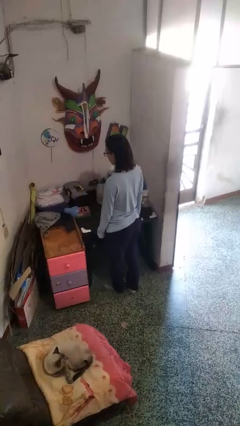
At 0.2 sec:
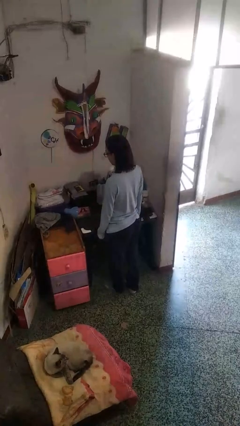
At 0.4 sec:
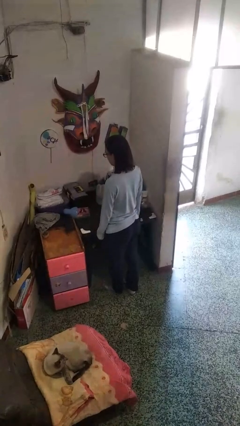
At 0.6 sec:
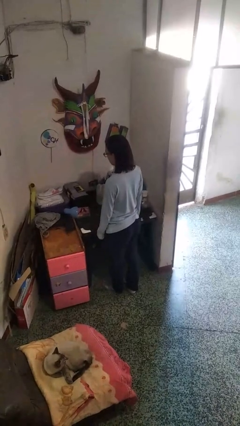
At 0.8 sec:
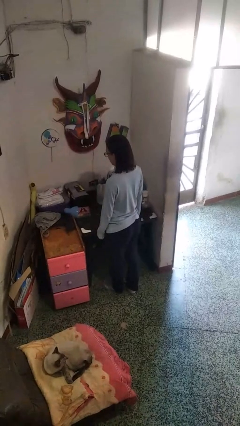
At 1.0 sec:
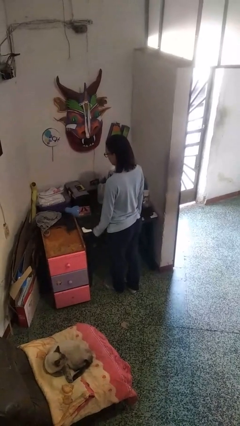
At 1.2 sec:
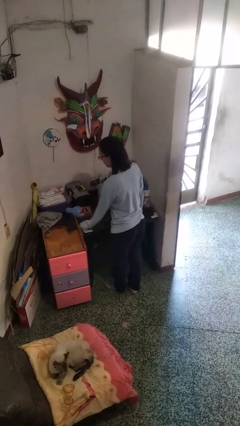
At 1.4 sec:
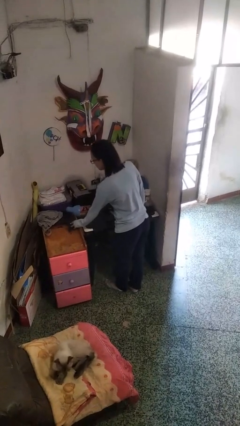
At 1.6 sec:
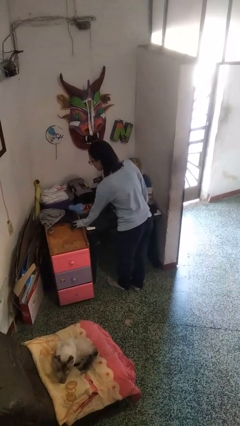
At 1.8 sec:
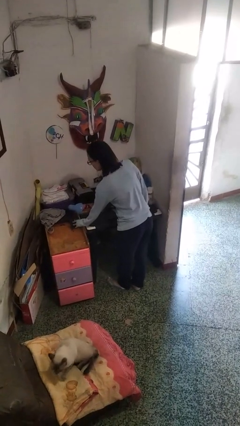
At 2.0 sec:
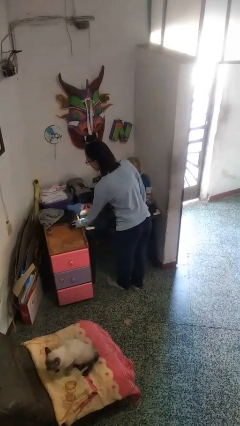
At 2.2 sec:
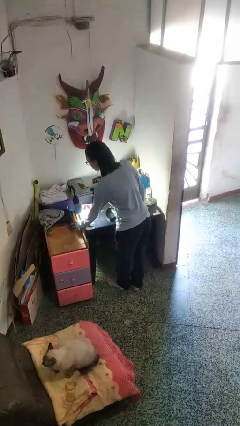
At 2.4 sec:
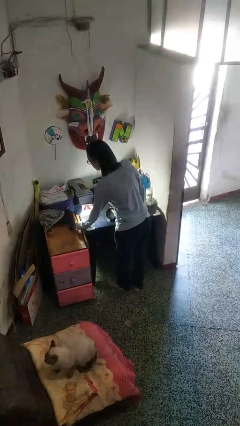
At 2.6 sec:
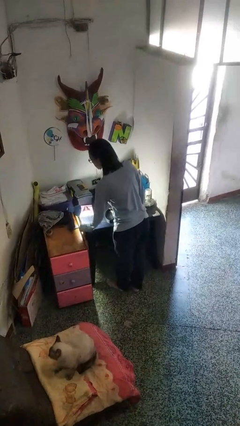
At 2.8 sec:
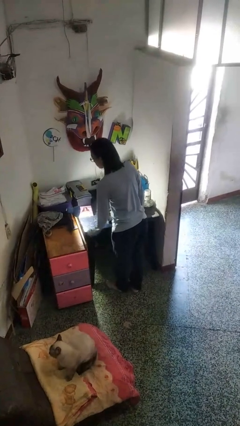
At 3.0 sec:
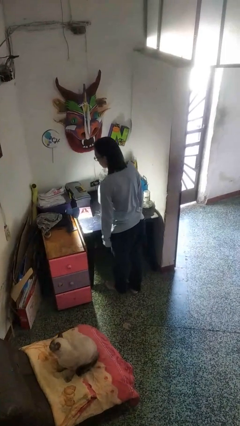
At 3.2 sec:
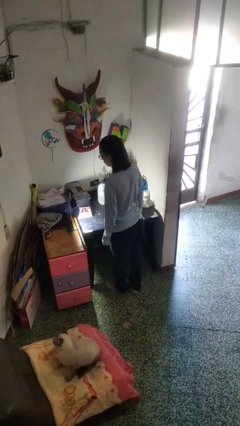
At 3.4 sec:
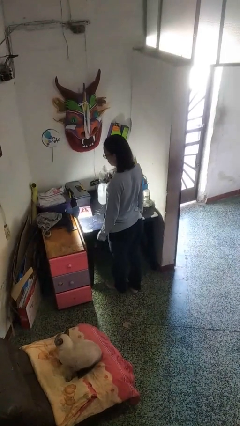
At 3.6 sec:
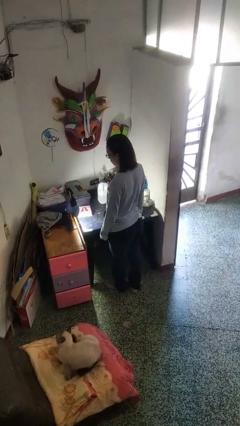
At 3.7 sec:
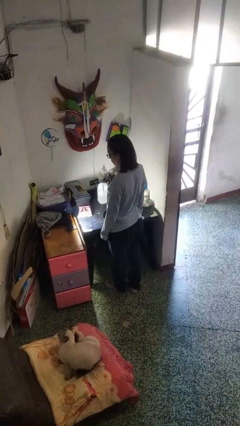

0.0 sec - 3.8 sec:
person turns on lamp

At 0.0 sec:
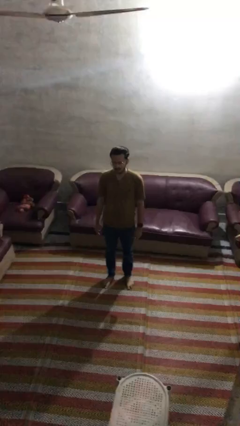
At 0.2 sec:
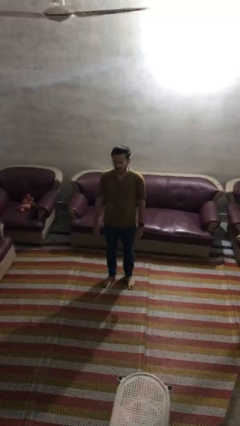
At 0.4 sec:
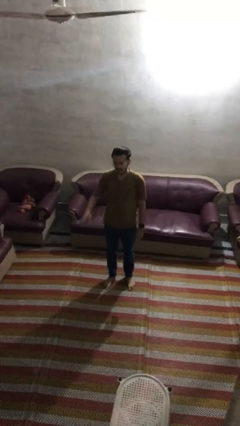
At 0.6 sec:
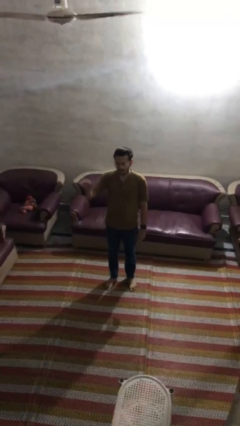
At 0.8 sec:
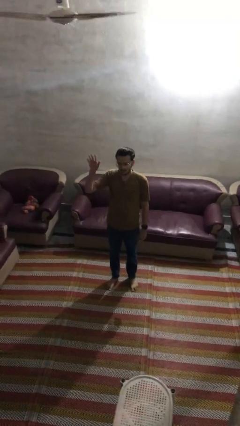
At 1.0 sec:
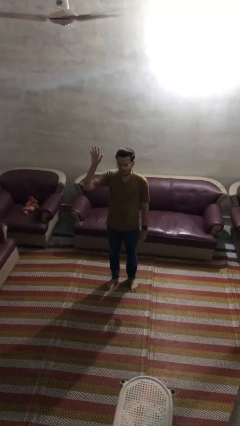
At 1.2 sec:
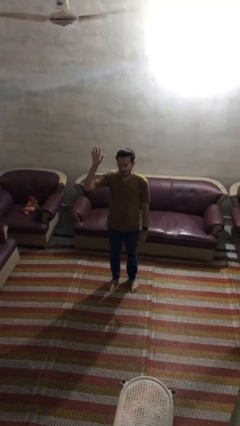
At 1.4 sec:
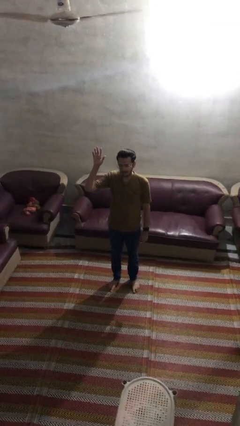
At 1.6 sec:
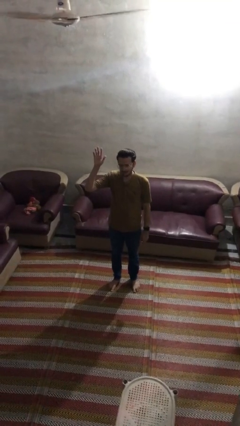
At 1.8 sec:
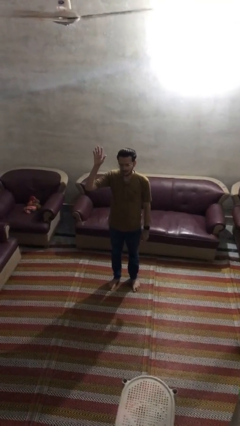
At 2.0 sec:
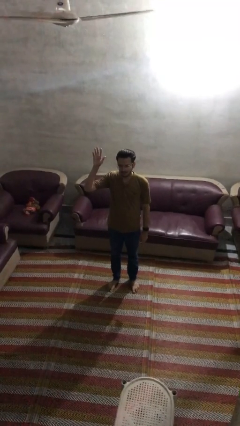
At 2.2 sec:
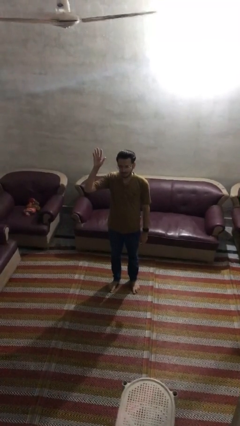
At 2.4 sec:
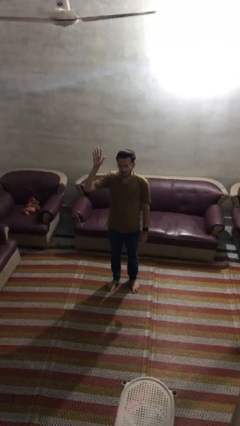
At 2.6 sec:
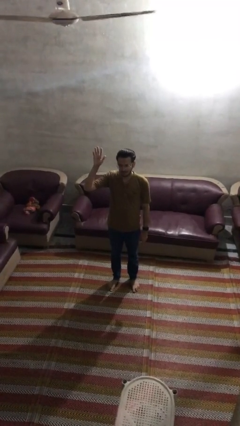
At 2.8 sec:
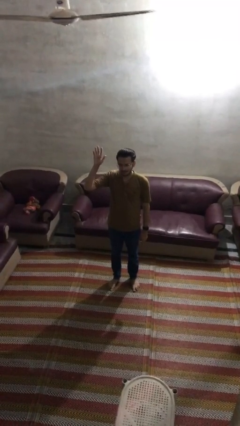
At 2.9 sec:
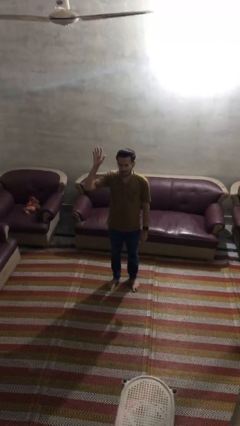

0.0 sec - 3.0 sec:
person gestures raise hand

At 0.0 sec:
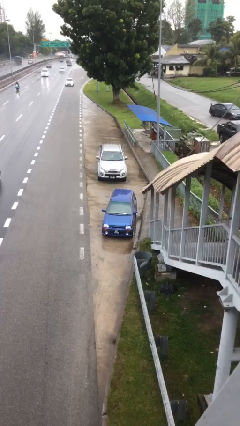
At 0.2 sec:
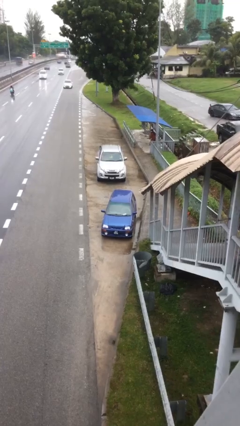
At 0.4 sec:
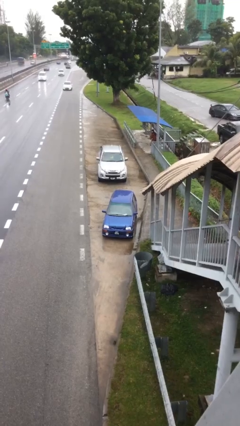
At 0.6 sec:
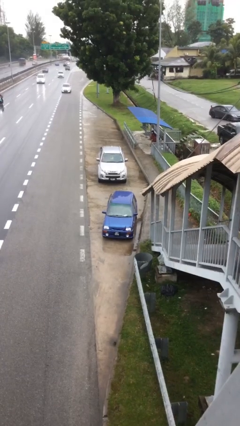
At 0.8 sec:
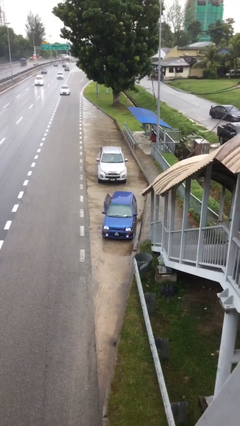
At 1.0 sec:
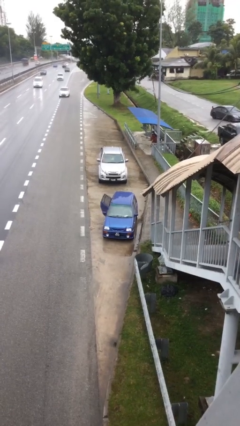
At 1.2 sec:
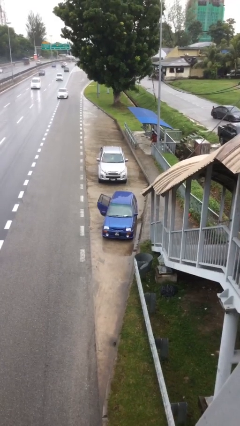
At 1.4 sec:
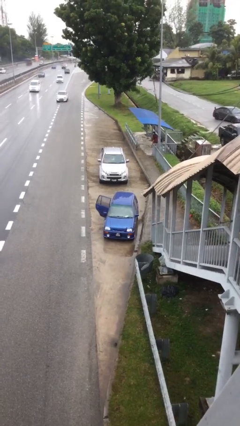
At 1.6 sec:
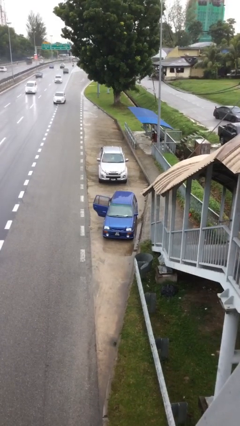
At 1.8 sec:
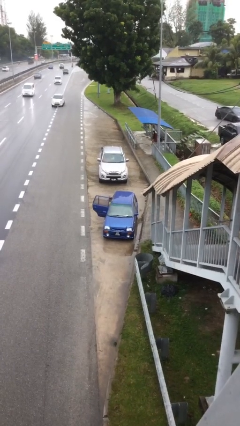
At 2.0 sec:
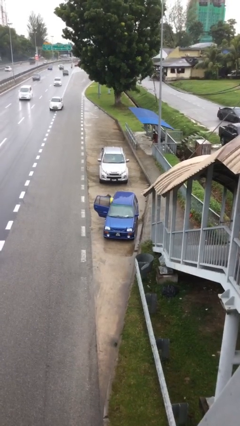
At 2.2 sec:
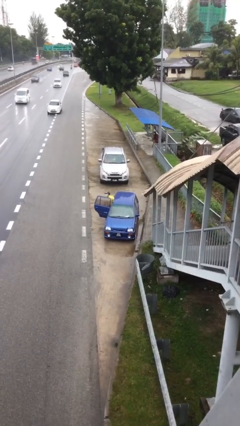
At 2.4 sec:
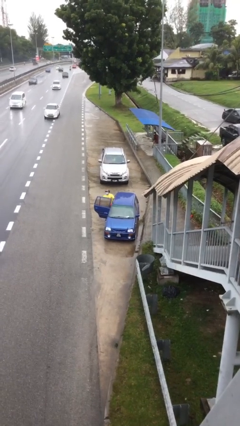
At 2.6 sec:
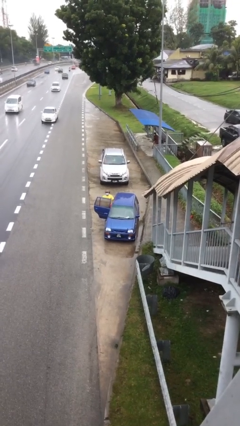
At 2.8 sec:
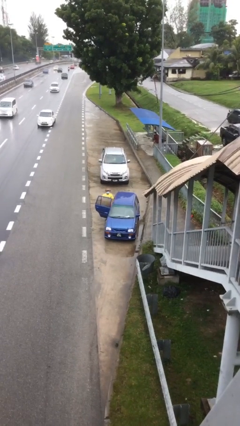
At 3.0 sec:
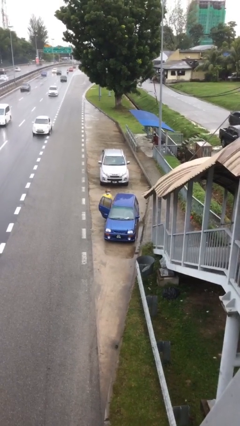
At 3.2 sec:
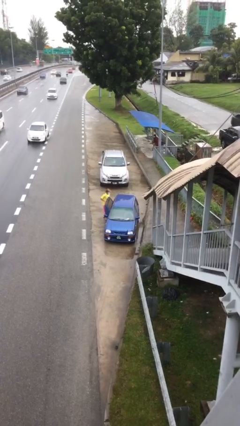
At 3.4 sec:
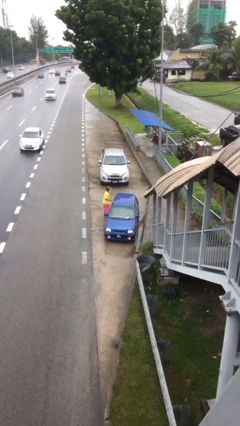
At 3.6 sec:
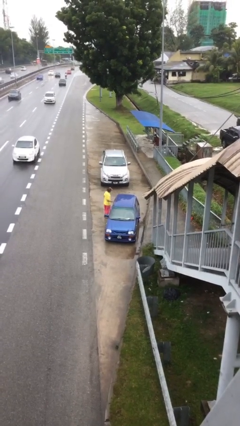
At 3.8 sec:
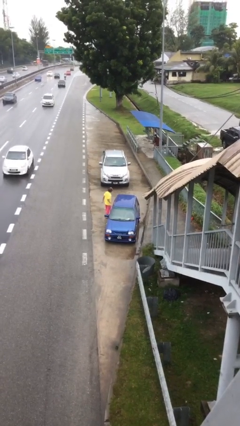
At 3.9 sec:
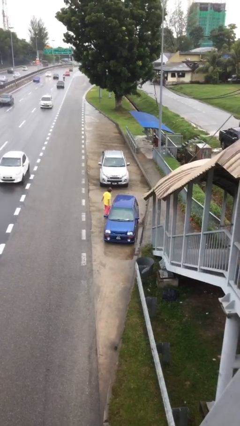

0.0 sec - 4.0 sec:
car drops off person

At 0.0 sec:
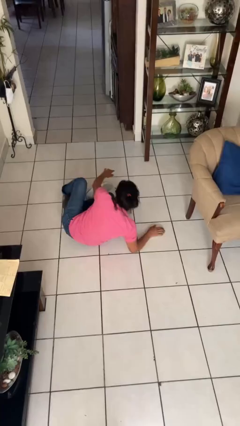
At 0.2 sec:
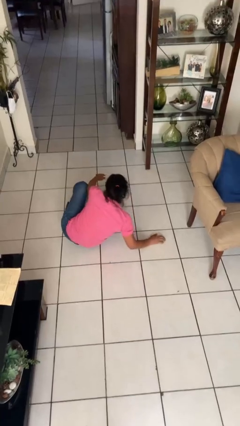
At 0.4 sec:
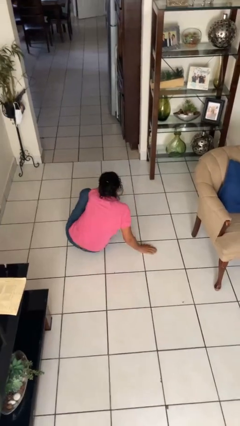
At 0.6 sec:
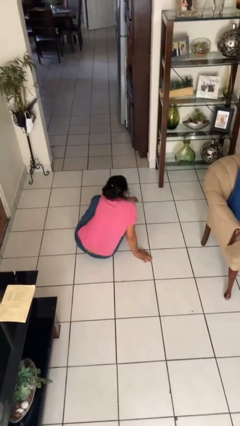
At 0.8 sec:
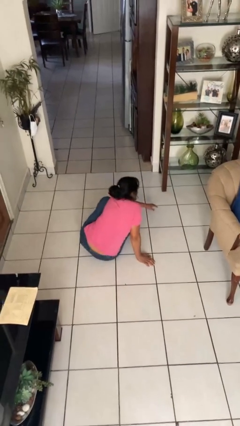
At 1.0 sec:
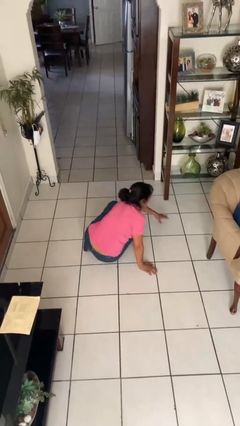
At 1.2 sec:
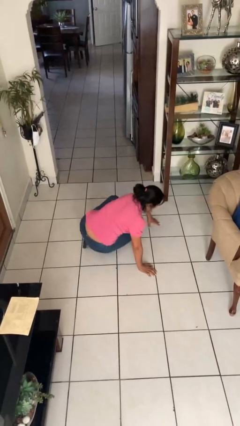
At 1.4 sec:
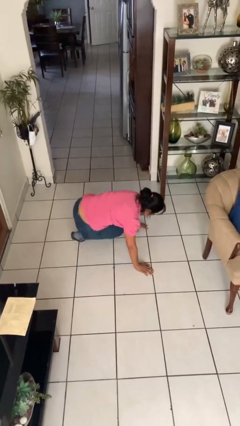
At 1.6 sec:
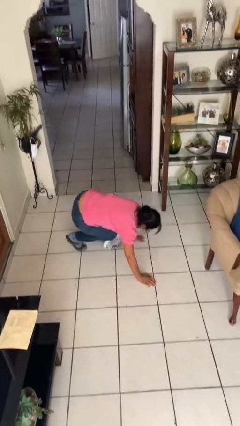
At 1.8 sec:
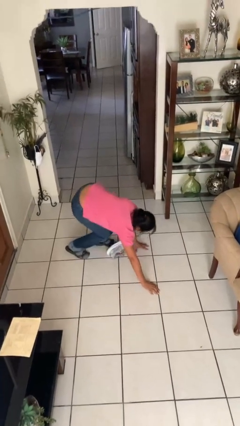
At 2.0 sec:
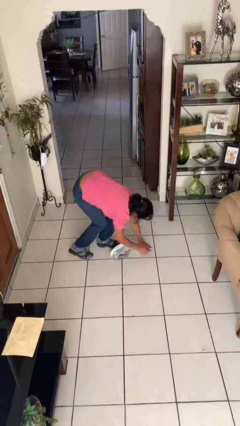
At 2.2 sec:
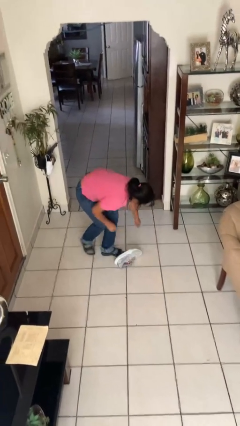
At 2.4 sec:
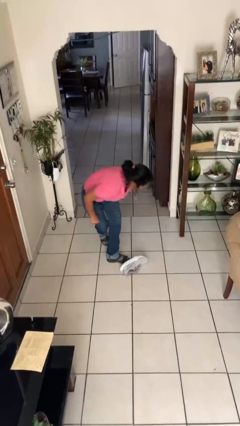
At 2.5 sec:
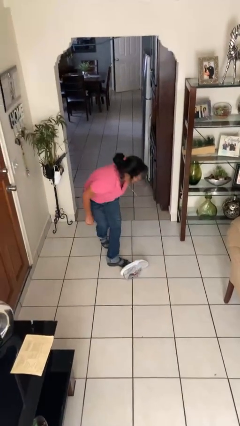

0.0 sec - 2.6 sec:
person stands up from floor

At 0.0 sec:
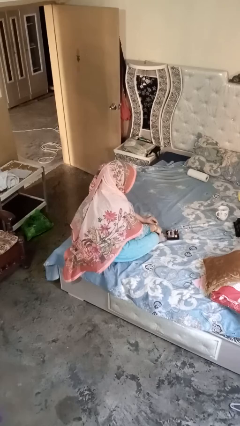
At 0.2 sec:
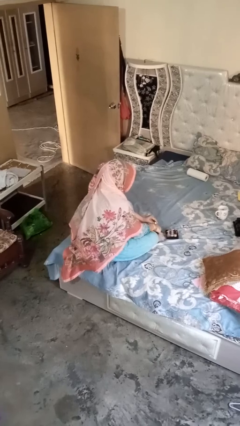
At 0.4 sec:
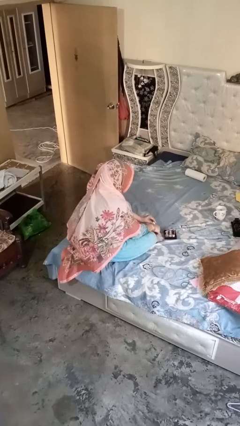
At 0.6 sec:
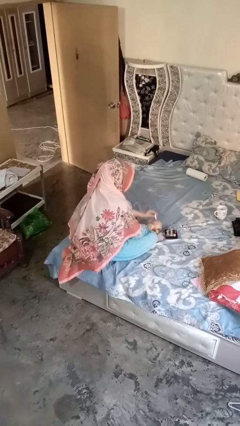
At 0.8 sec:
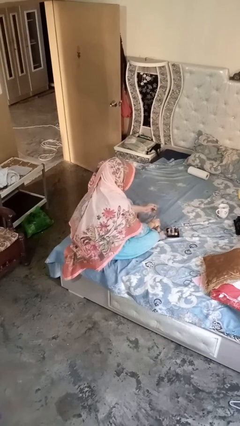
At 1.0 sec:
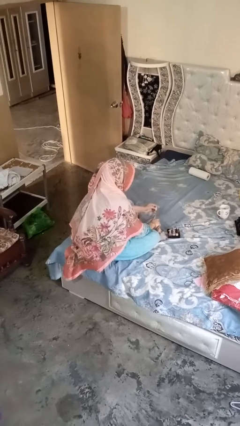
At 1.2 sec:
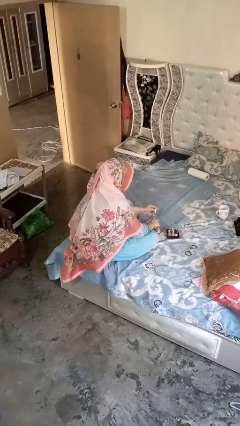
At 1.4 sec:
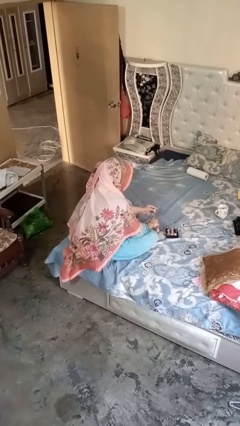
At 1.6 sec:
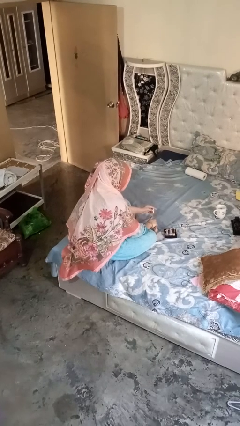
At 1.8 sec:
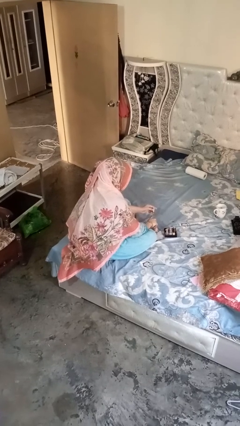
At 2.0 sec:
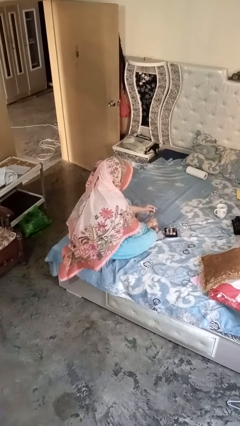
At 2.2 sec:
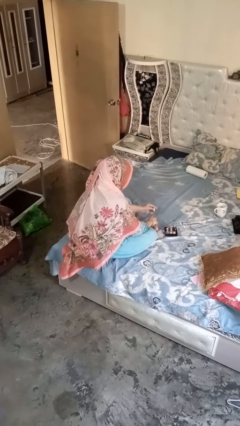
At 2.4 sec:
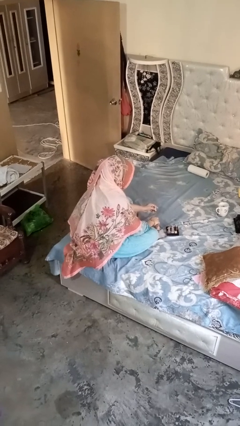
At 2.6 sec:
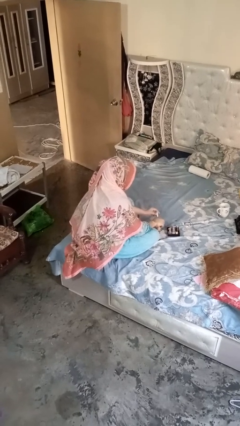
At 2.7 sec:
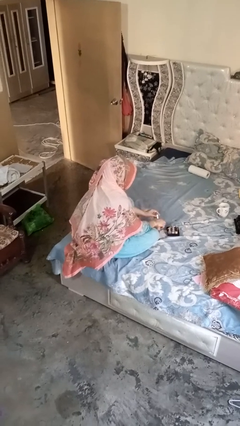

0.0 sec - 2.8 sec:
person paints fingernails

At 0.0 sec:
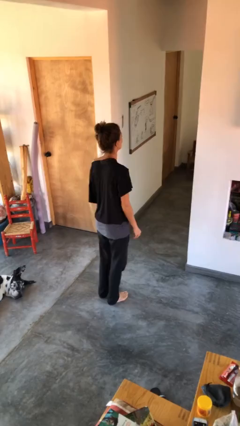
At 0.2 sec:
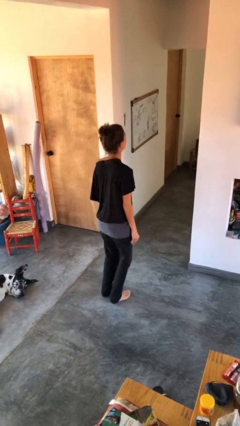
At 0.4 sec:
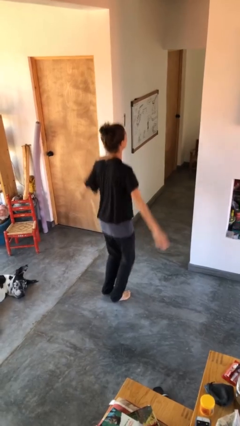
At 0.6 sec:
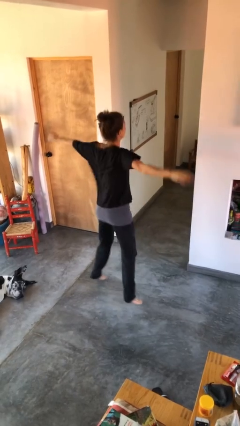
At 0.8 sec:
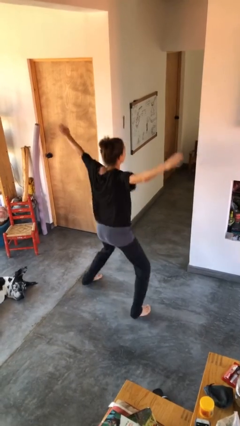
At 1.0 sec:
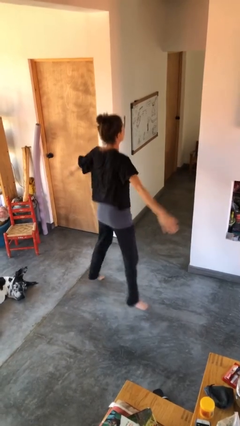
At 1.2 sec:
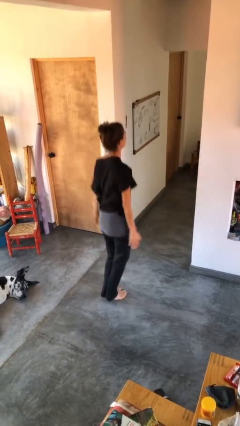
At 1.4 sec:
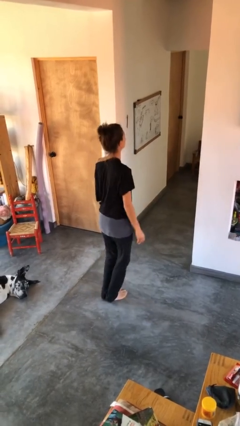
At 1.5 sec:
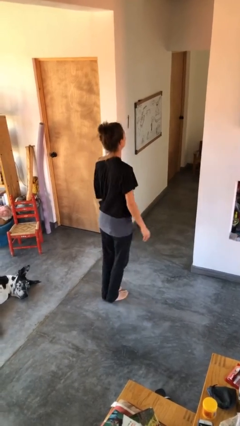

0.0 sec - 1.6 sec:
person exercises with jumping jacks
